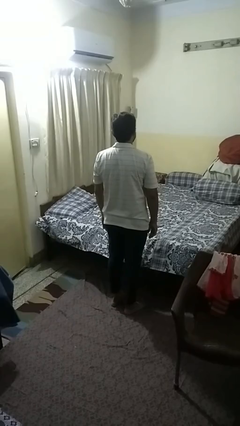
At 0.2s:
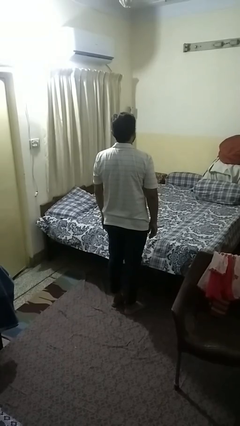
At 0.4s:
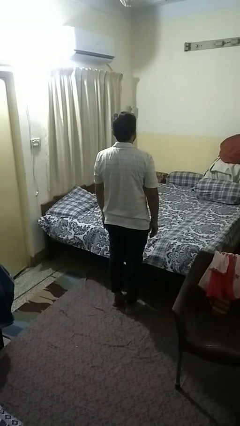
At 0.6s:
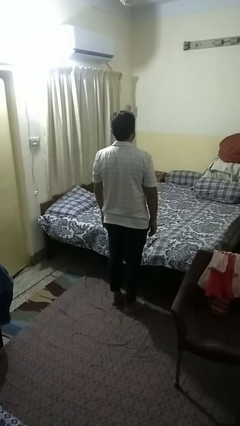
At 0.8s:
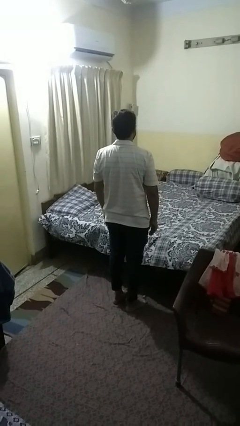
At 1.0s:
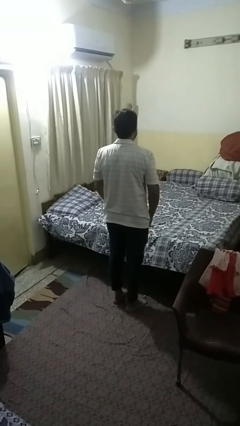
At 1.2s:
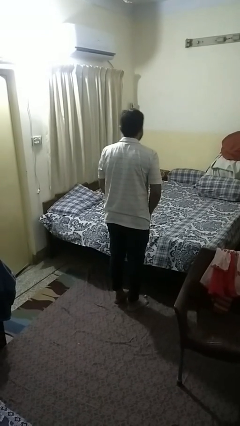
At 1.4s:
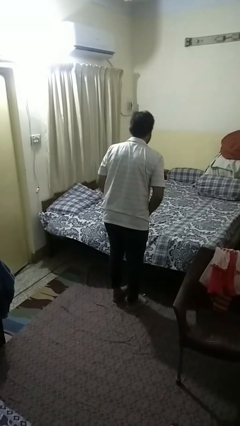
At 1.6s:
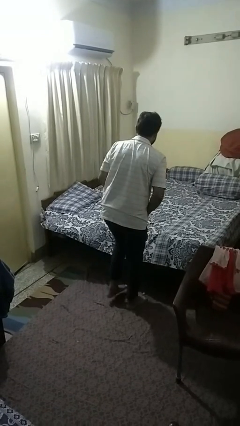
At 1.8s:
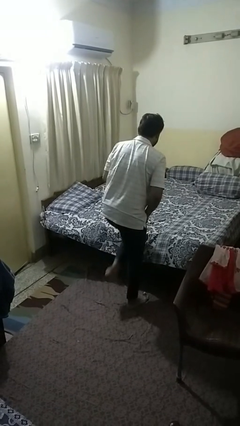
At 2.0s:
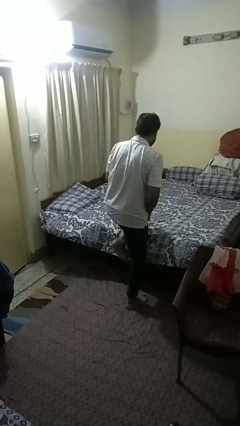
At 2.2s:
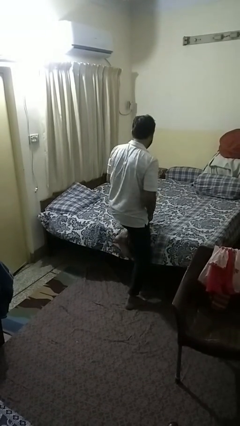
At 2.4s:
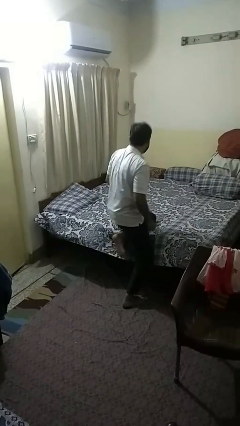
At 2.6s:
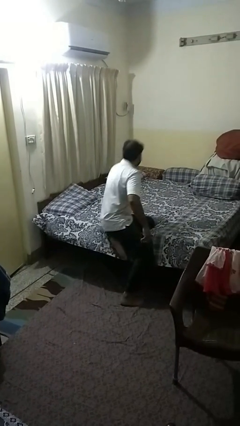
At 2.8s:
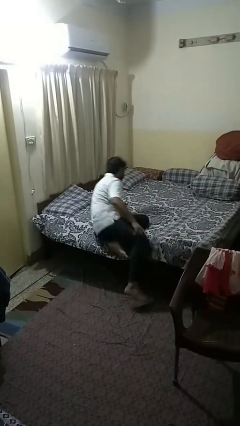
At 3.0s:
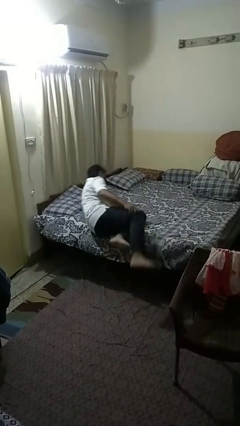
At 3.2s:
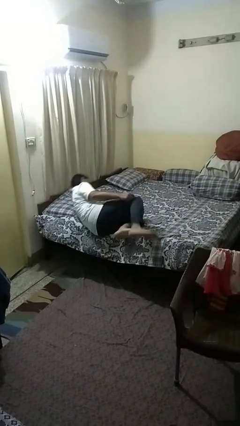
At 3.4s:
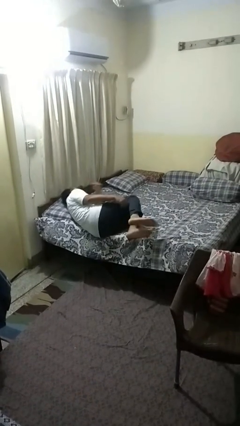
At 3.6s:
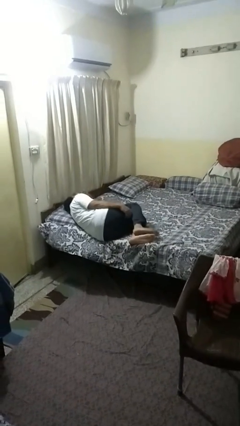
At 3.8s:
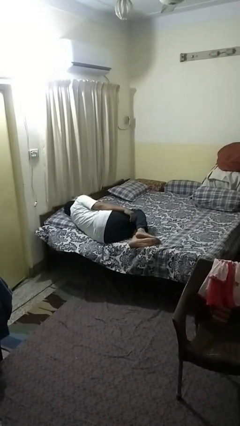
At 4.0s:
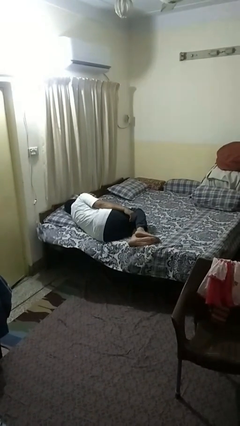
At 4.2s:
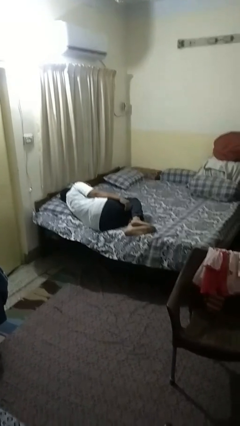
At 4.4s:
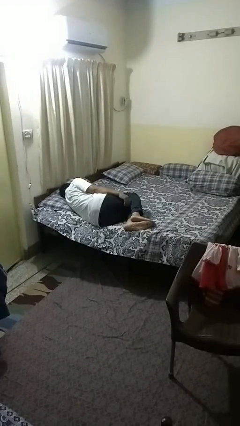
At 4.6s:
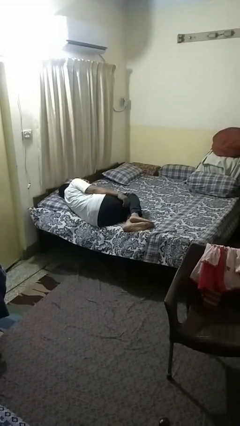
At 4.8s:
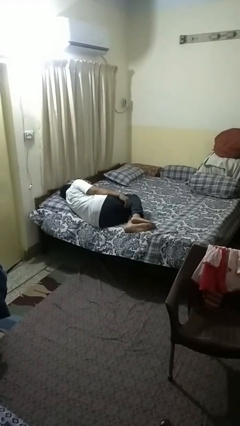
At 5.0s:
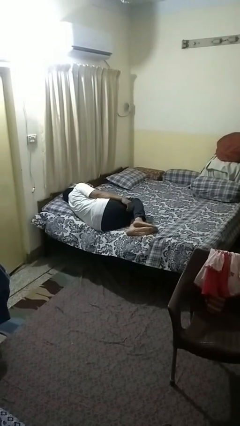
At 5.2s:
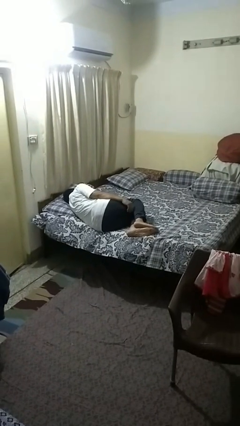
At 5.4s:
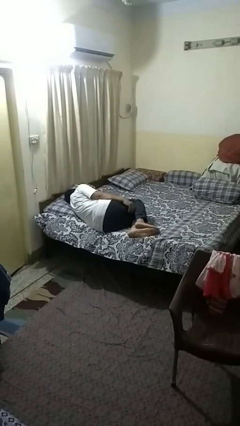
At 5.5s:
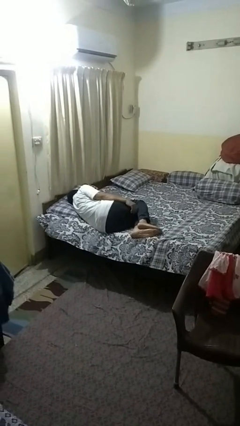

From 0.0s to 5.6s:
person lies down on bed

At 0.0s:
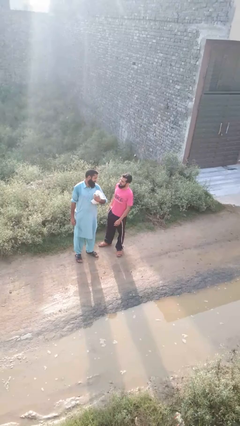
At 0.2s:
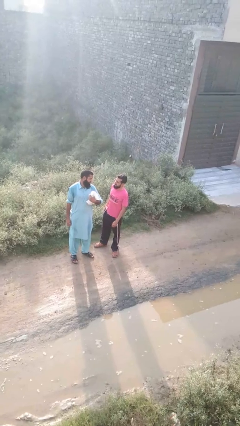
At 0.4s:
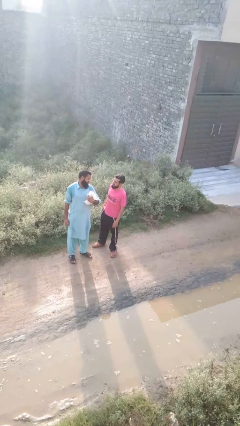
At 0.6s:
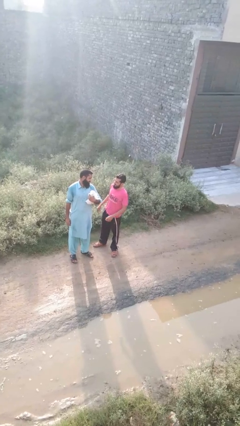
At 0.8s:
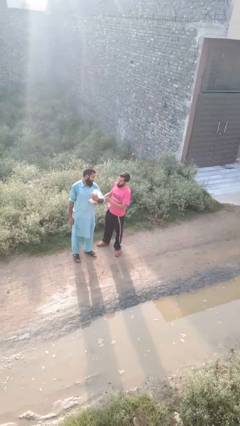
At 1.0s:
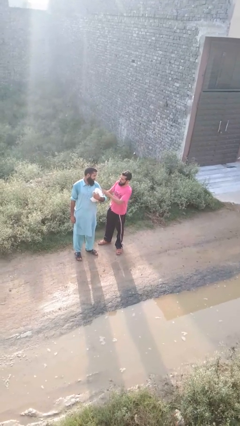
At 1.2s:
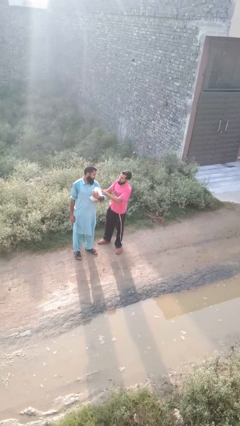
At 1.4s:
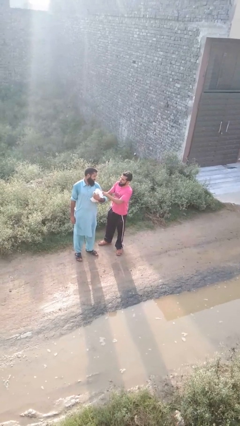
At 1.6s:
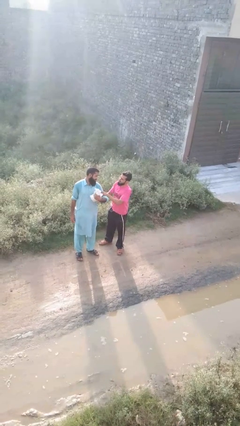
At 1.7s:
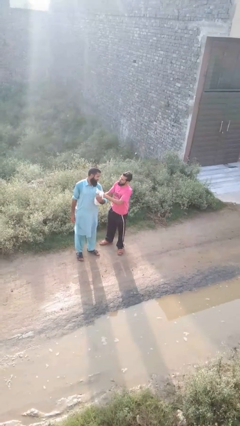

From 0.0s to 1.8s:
person grabs person by bicep

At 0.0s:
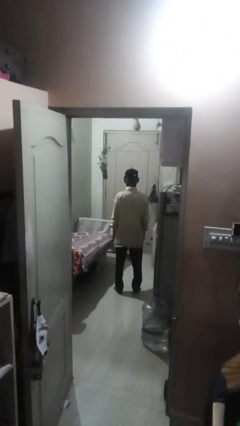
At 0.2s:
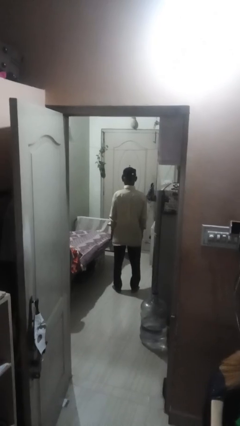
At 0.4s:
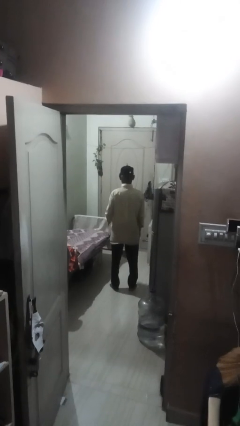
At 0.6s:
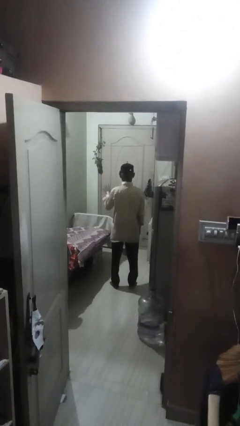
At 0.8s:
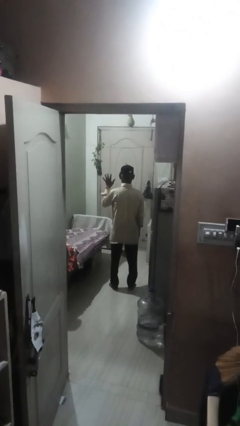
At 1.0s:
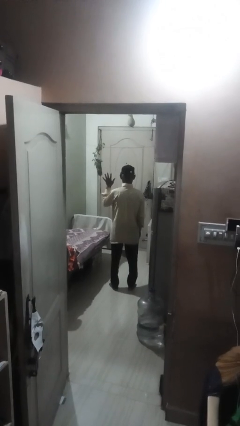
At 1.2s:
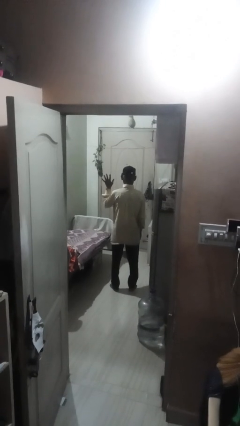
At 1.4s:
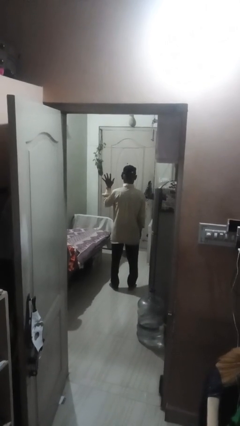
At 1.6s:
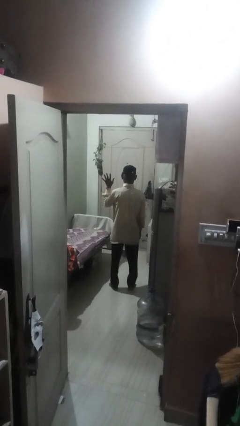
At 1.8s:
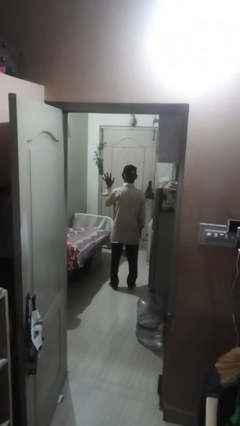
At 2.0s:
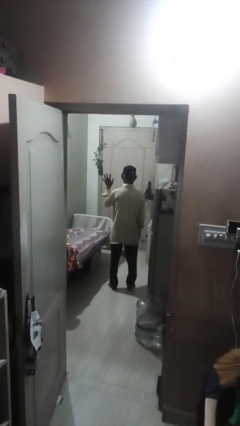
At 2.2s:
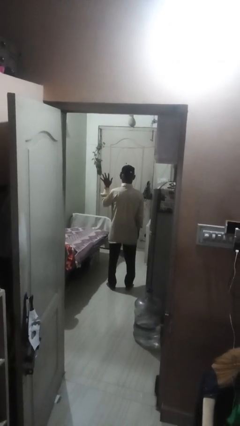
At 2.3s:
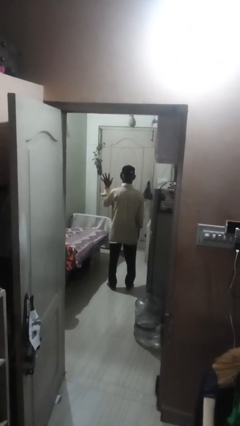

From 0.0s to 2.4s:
person gestures number five

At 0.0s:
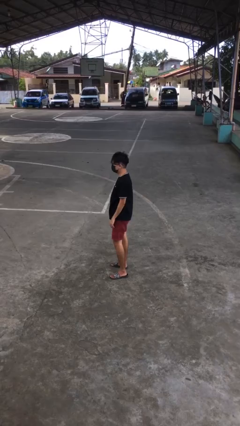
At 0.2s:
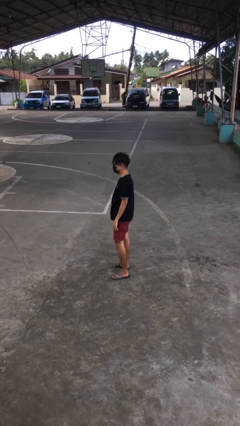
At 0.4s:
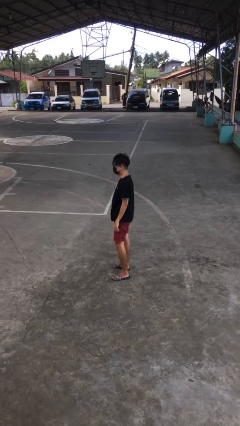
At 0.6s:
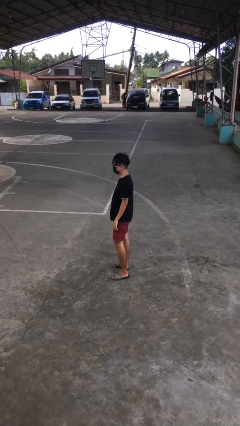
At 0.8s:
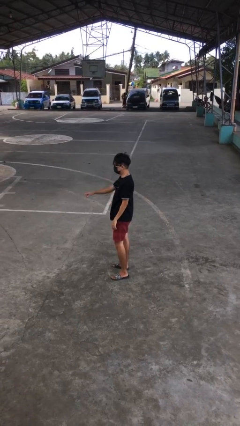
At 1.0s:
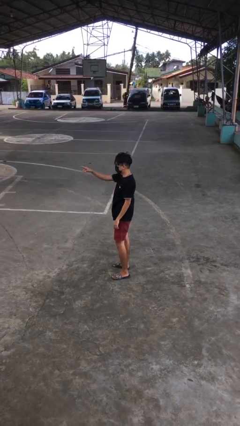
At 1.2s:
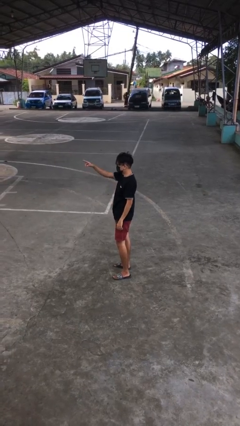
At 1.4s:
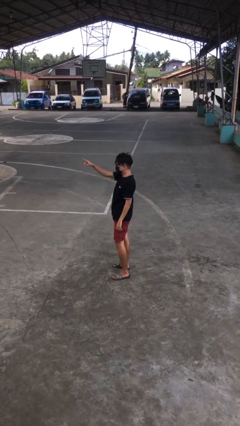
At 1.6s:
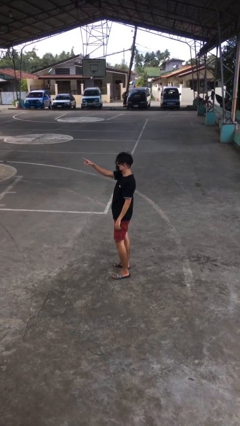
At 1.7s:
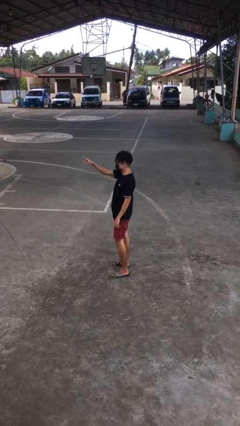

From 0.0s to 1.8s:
person points at person

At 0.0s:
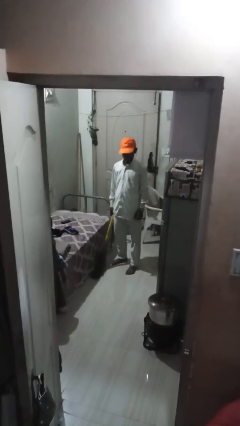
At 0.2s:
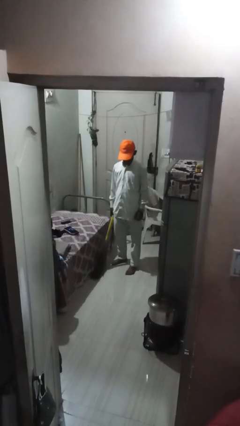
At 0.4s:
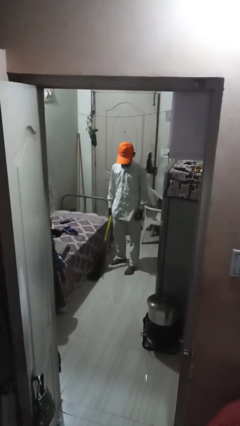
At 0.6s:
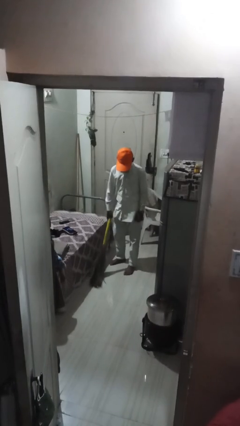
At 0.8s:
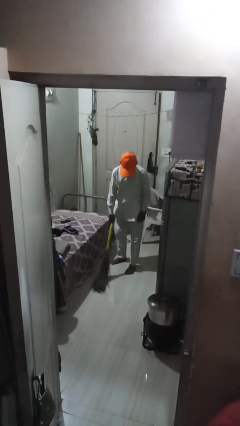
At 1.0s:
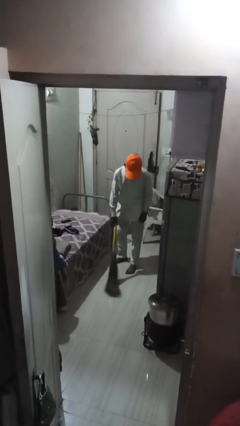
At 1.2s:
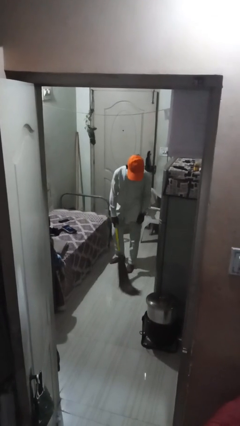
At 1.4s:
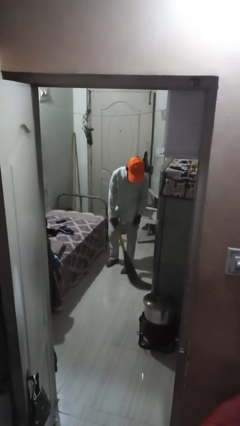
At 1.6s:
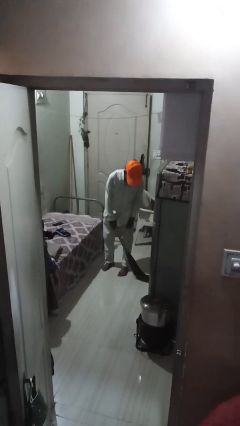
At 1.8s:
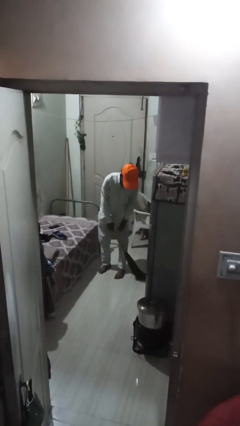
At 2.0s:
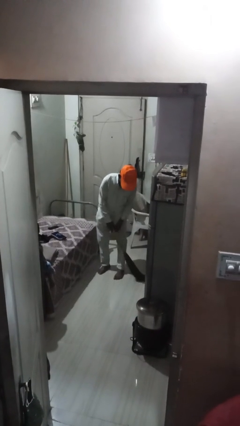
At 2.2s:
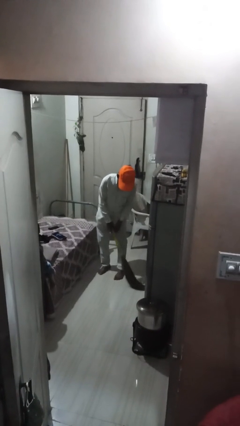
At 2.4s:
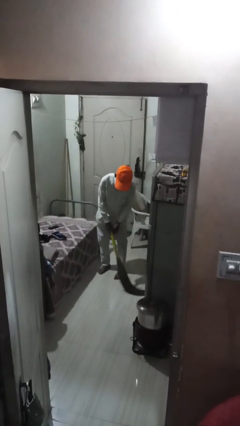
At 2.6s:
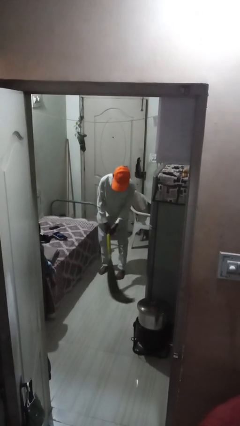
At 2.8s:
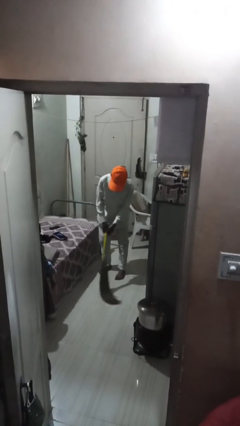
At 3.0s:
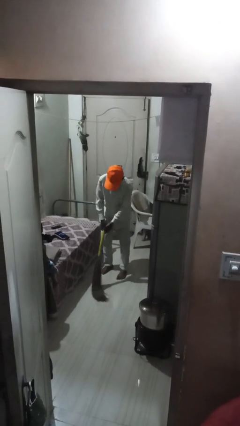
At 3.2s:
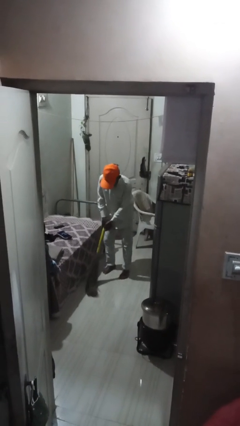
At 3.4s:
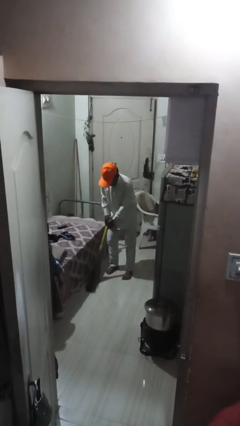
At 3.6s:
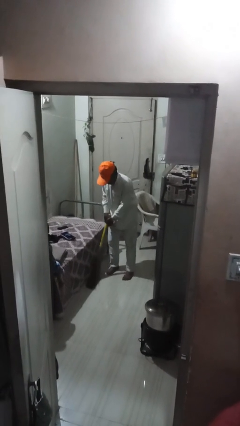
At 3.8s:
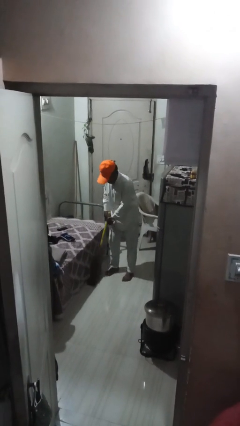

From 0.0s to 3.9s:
person sweeps floor

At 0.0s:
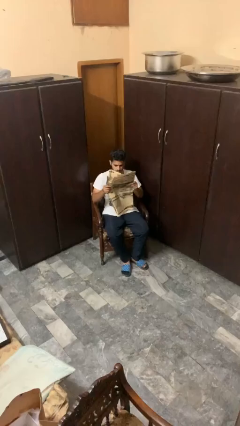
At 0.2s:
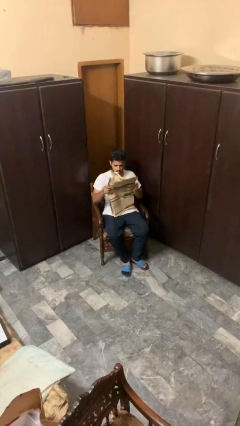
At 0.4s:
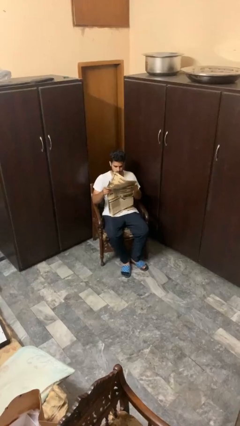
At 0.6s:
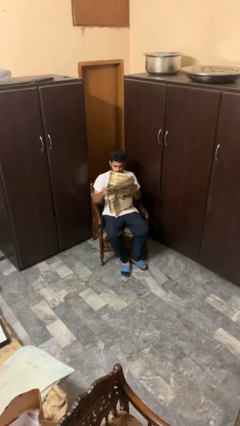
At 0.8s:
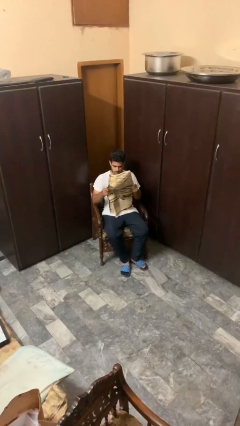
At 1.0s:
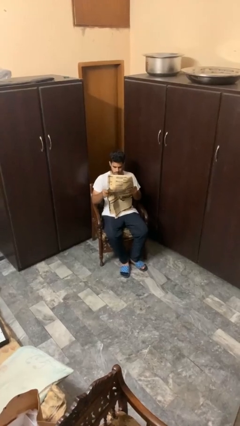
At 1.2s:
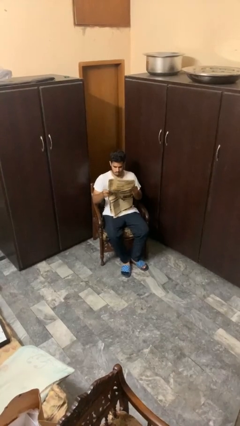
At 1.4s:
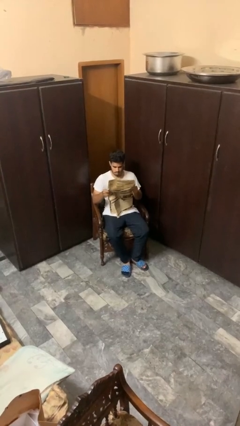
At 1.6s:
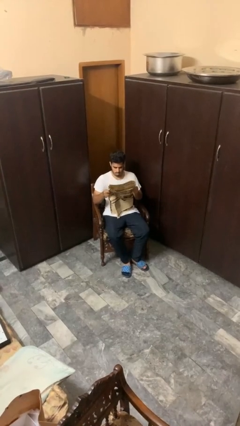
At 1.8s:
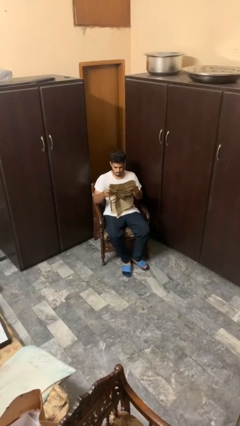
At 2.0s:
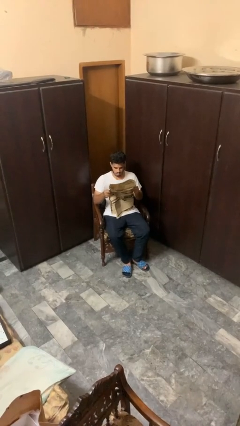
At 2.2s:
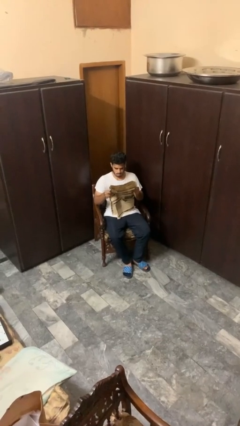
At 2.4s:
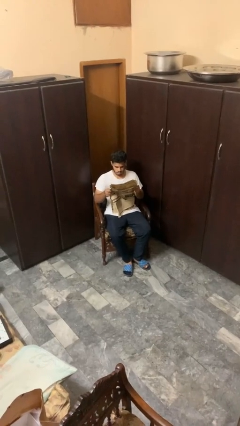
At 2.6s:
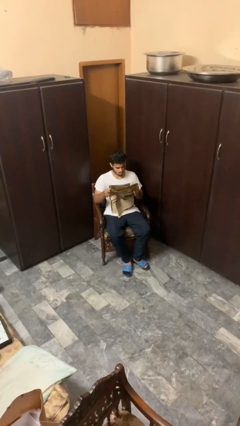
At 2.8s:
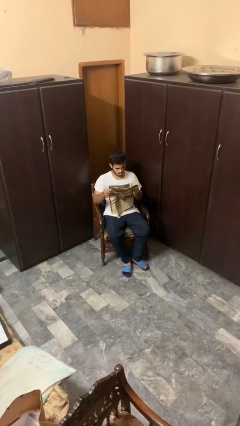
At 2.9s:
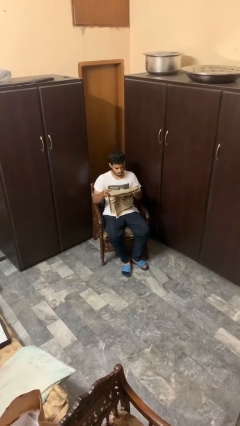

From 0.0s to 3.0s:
person reads newspaper
